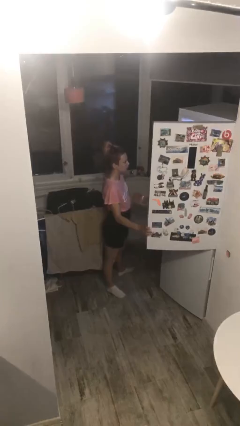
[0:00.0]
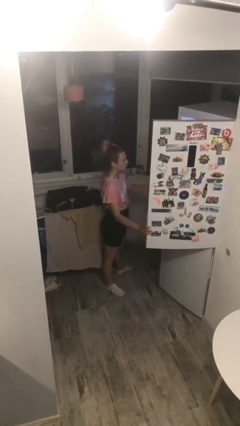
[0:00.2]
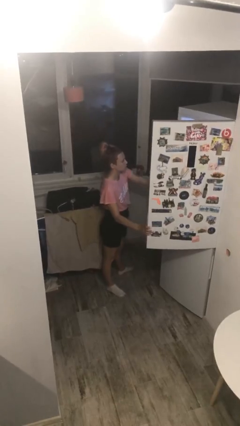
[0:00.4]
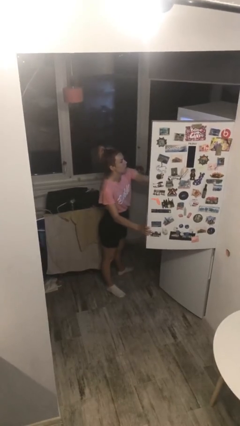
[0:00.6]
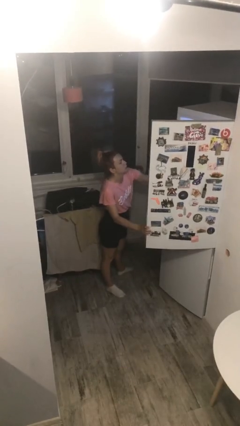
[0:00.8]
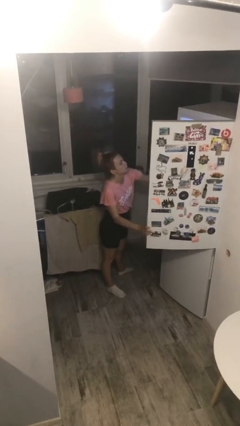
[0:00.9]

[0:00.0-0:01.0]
person puts object into refrigerator

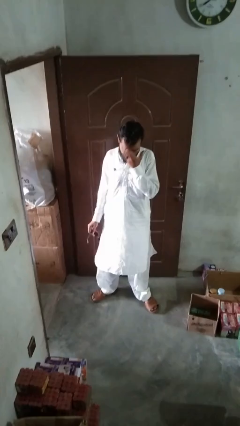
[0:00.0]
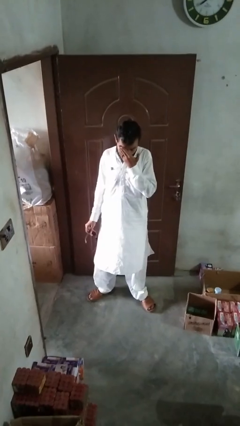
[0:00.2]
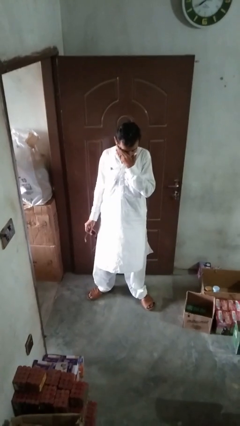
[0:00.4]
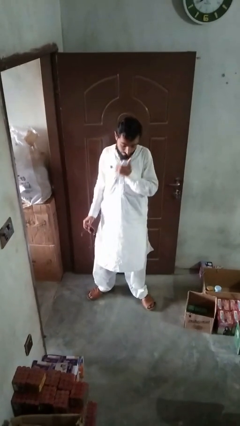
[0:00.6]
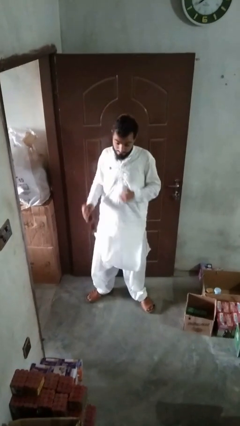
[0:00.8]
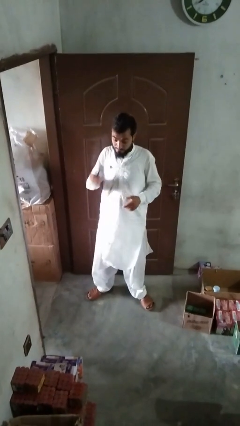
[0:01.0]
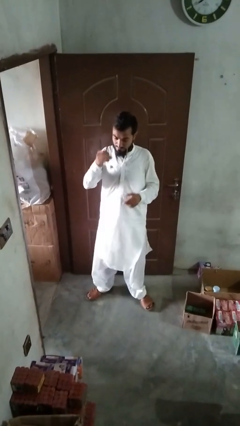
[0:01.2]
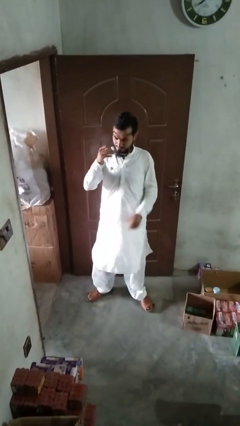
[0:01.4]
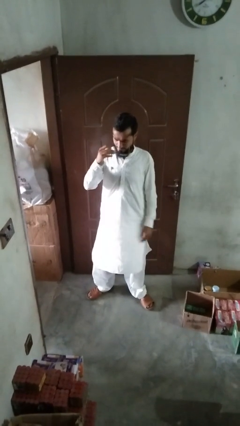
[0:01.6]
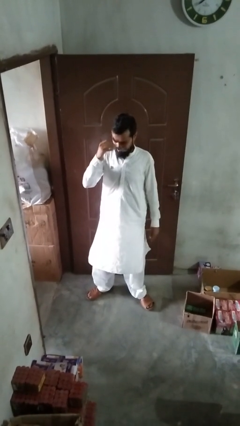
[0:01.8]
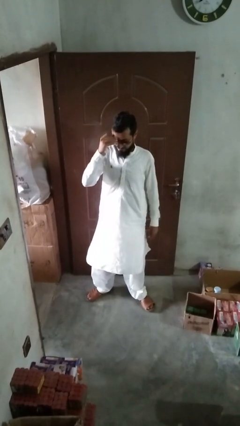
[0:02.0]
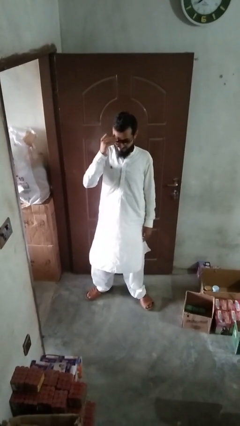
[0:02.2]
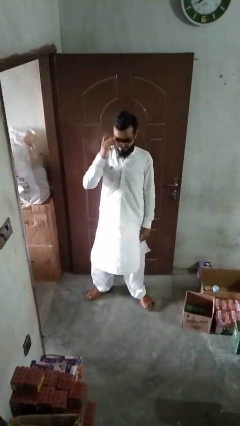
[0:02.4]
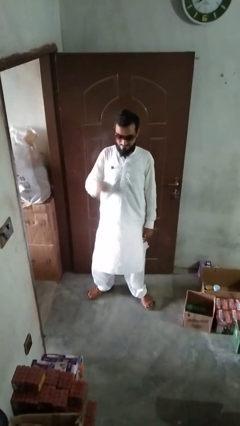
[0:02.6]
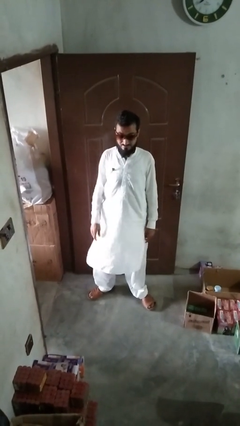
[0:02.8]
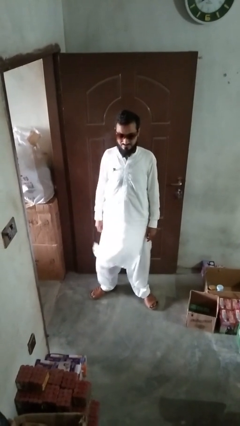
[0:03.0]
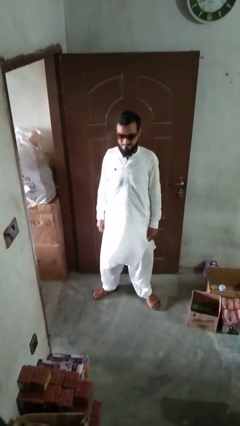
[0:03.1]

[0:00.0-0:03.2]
person puts on sunglasses

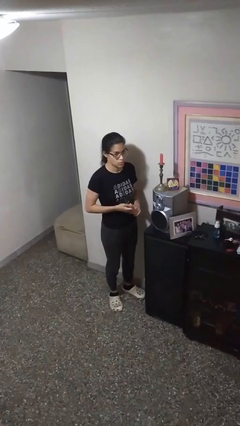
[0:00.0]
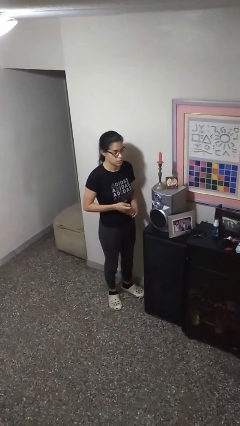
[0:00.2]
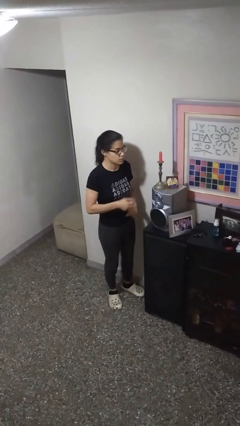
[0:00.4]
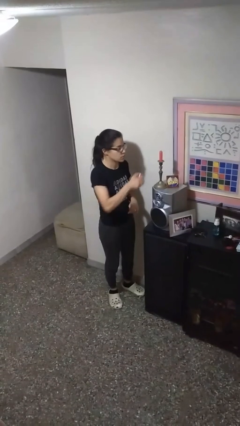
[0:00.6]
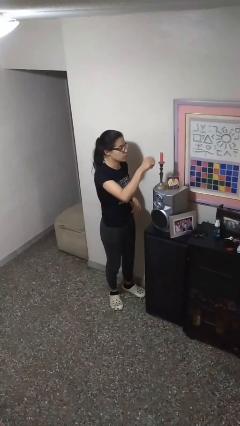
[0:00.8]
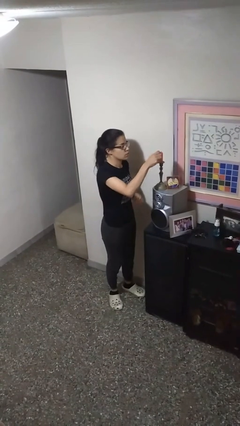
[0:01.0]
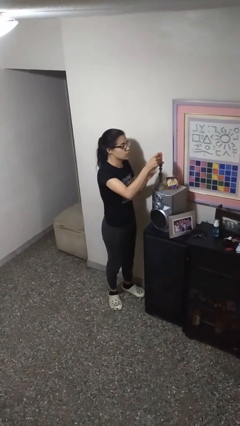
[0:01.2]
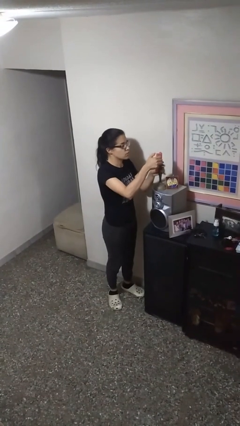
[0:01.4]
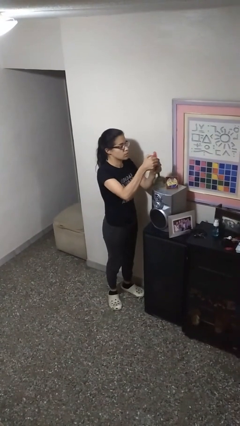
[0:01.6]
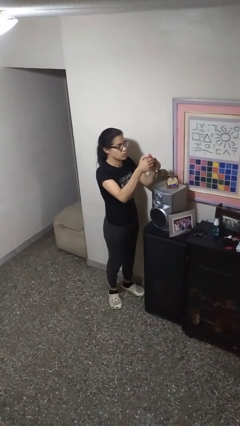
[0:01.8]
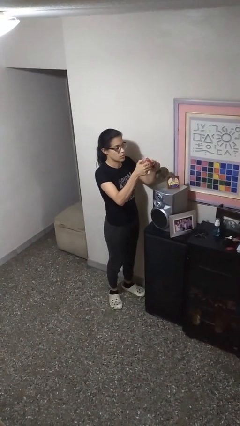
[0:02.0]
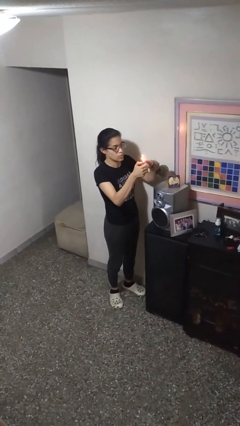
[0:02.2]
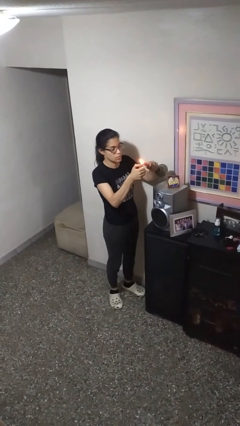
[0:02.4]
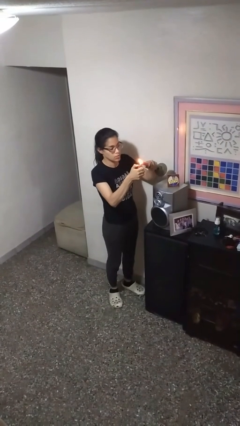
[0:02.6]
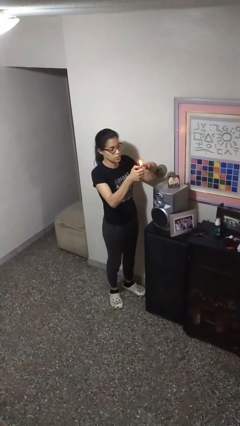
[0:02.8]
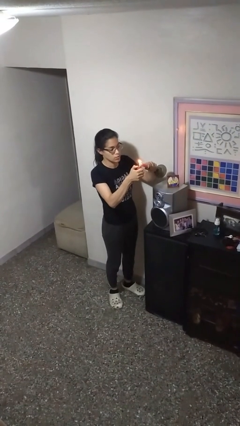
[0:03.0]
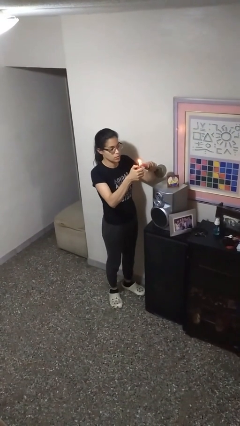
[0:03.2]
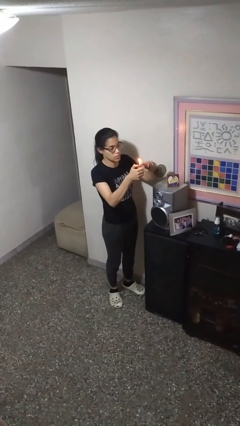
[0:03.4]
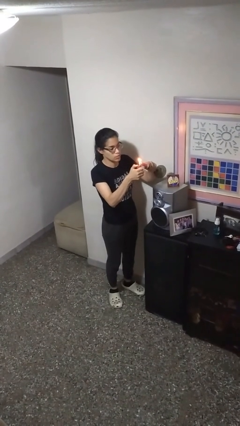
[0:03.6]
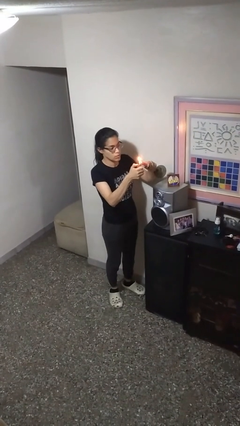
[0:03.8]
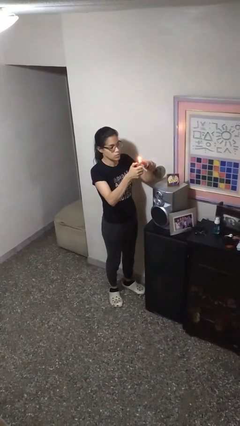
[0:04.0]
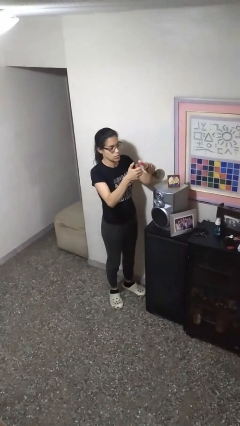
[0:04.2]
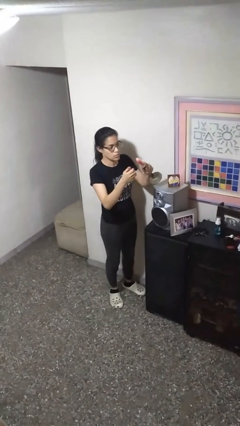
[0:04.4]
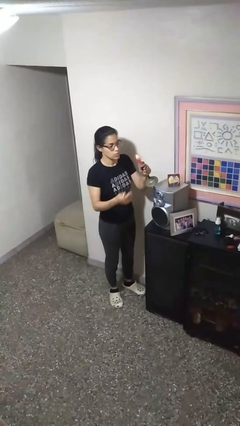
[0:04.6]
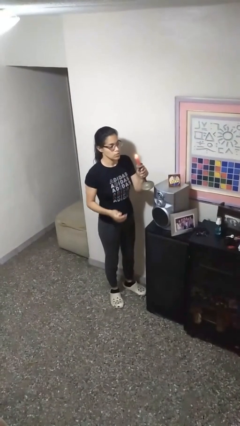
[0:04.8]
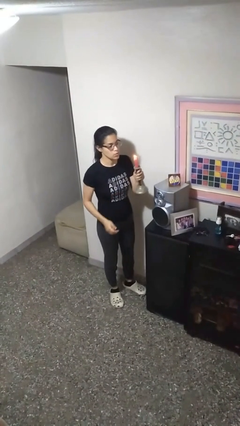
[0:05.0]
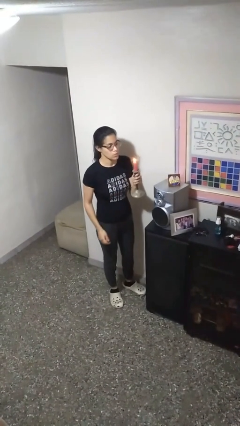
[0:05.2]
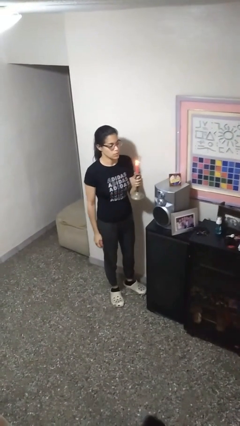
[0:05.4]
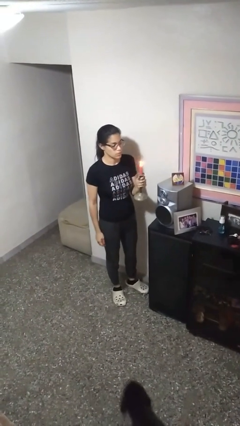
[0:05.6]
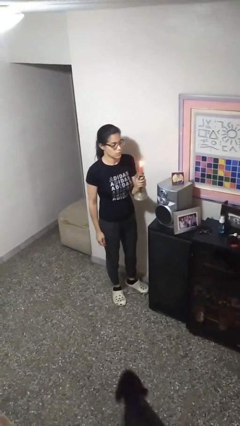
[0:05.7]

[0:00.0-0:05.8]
person lights candle

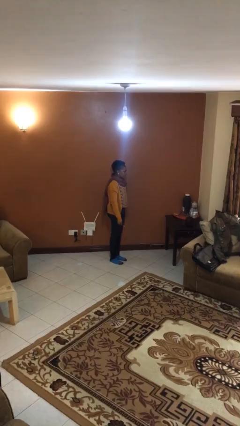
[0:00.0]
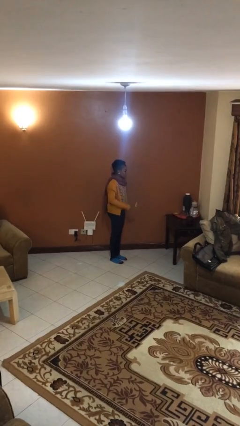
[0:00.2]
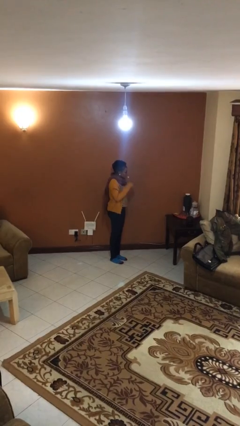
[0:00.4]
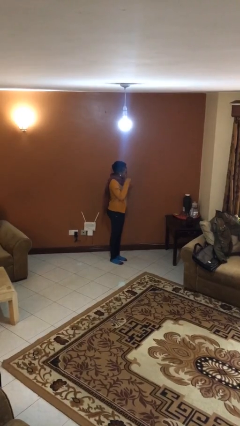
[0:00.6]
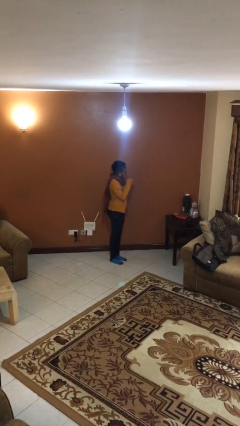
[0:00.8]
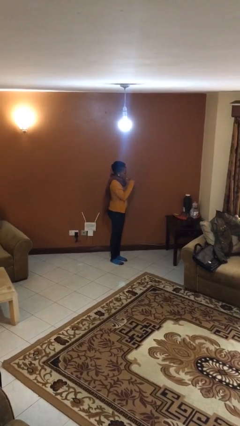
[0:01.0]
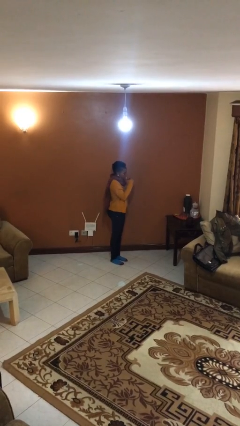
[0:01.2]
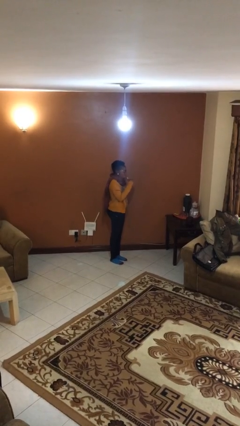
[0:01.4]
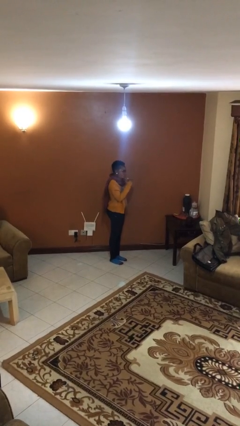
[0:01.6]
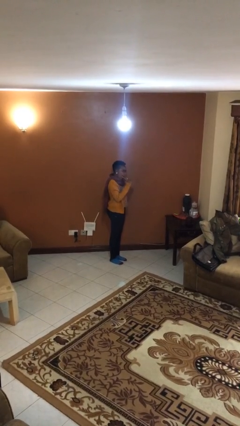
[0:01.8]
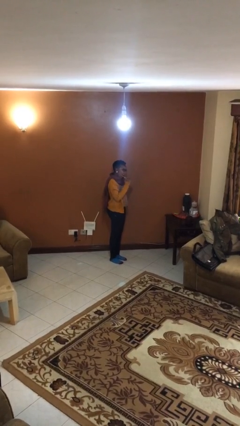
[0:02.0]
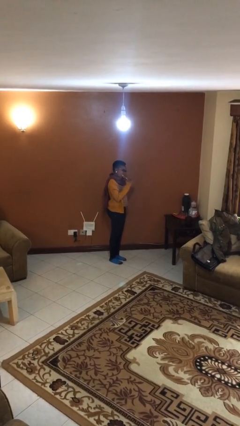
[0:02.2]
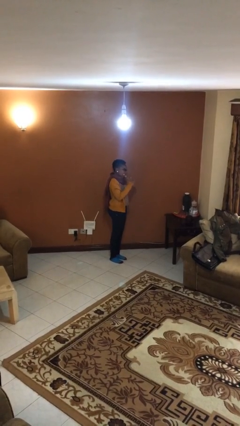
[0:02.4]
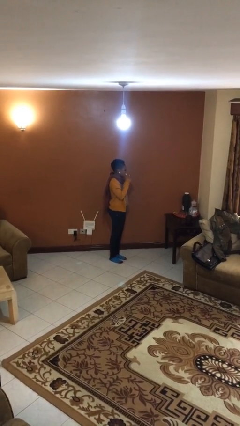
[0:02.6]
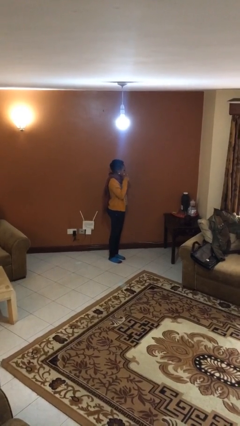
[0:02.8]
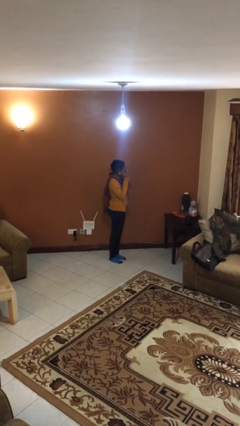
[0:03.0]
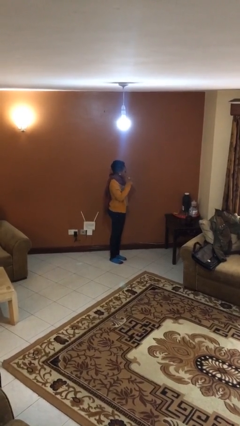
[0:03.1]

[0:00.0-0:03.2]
person brushes teeth

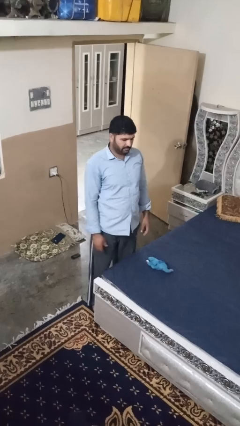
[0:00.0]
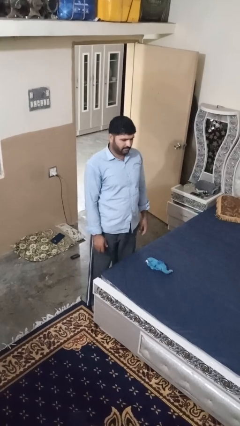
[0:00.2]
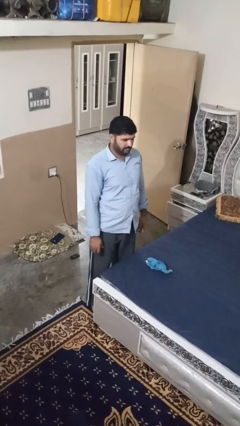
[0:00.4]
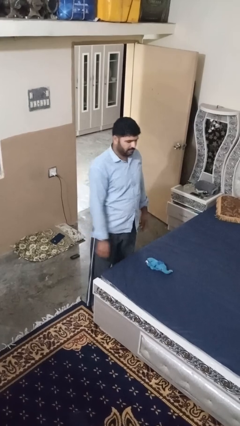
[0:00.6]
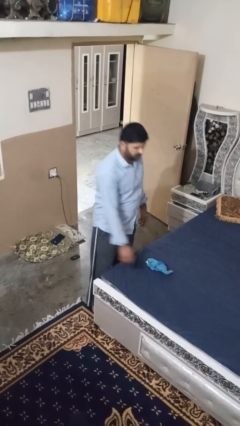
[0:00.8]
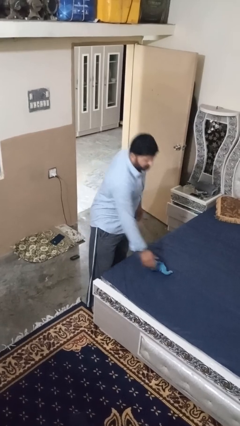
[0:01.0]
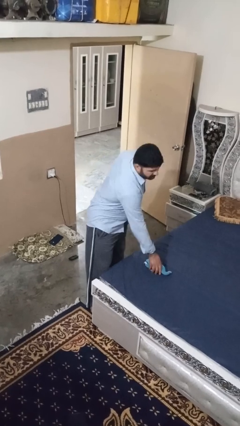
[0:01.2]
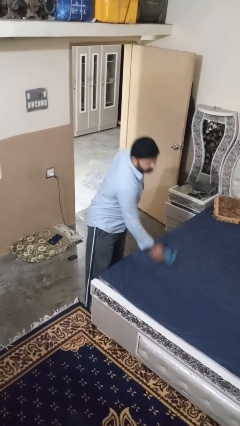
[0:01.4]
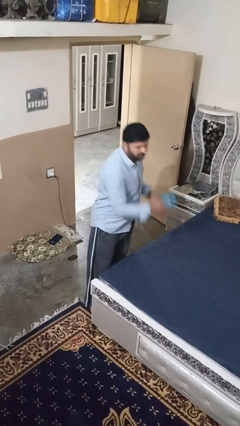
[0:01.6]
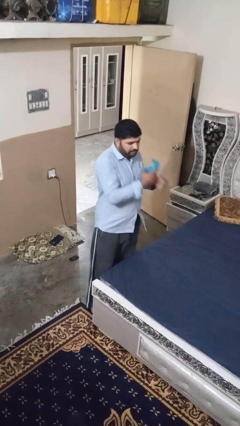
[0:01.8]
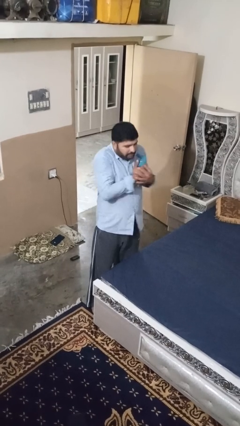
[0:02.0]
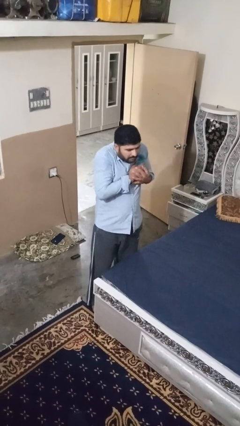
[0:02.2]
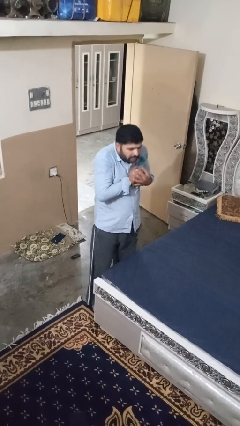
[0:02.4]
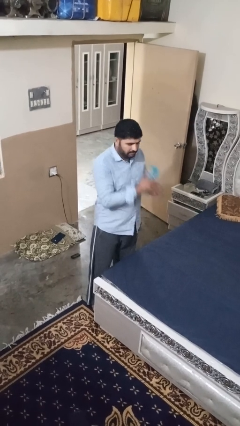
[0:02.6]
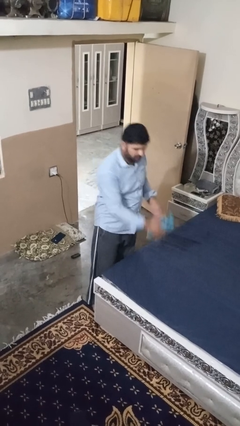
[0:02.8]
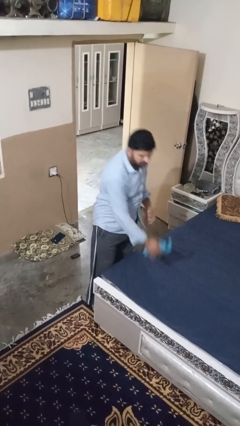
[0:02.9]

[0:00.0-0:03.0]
person hugs stuffed animal

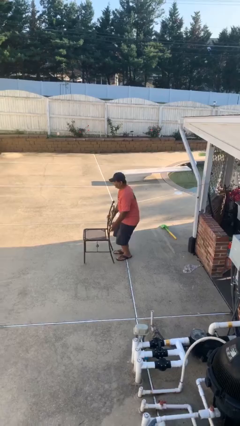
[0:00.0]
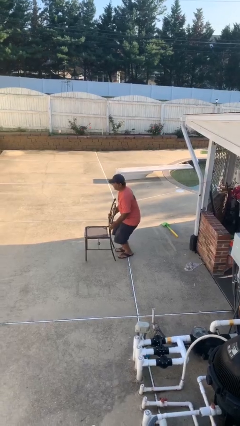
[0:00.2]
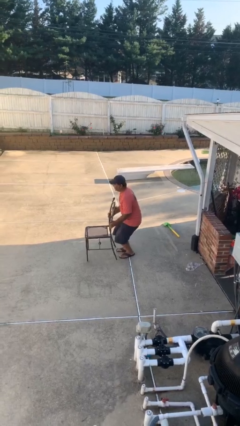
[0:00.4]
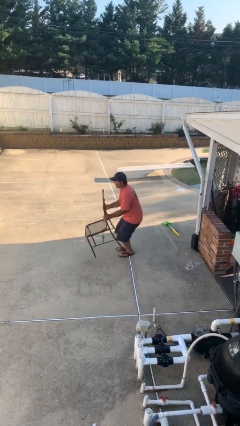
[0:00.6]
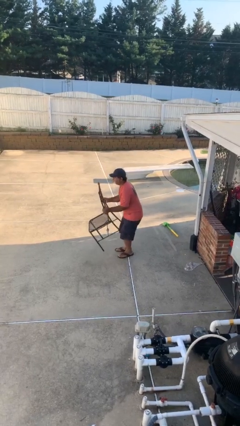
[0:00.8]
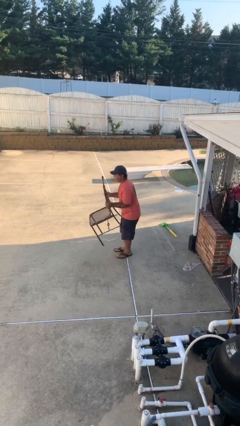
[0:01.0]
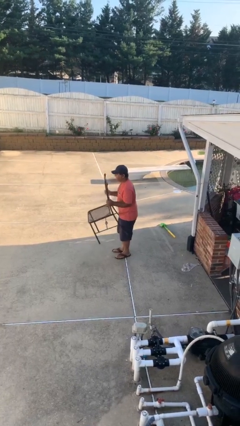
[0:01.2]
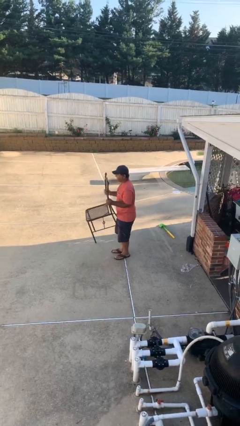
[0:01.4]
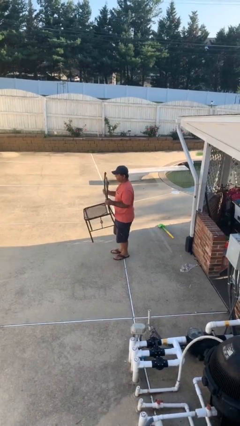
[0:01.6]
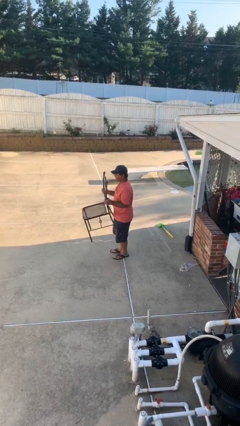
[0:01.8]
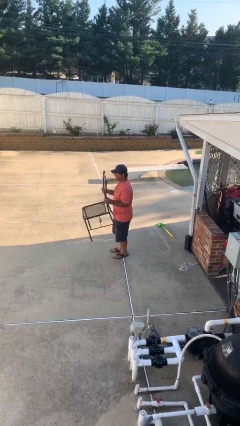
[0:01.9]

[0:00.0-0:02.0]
person picks up object from floor
